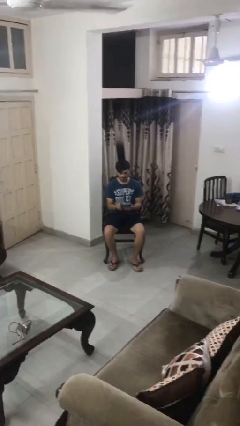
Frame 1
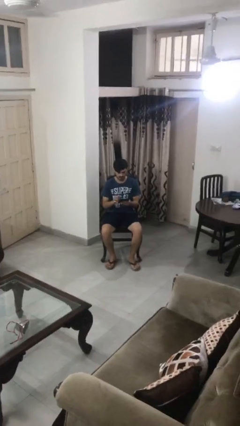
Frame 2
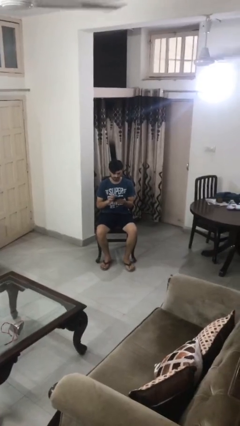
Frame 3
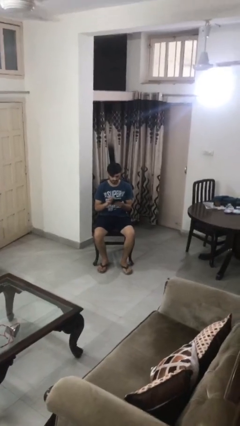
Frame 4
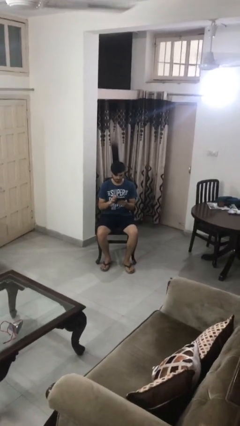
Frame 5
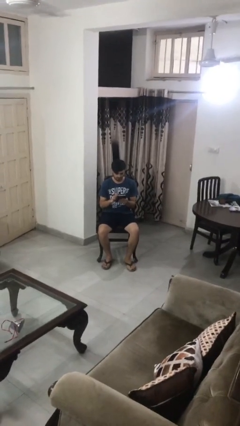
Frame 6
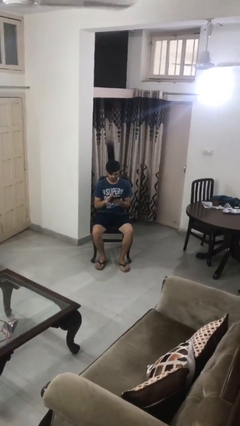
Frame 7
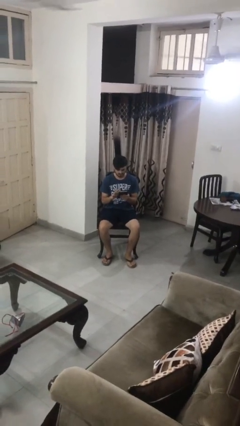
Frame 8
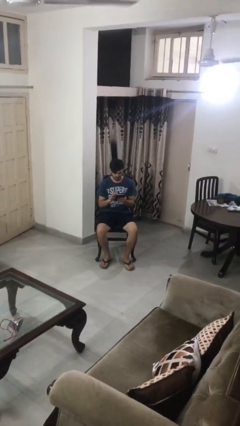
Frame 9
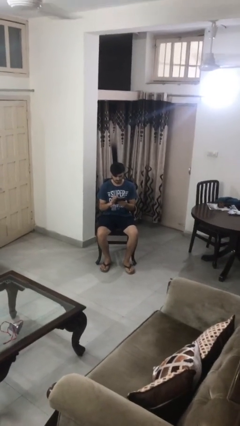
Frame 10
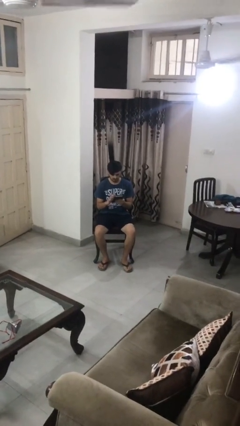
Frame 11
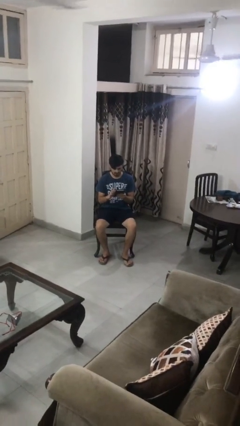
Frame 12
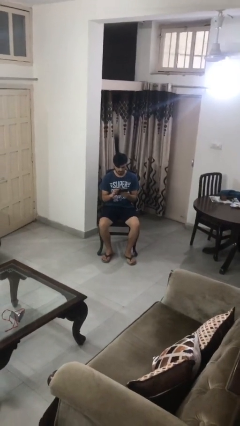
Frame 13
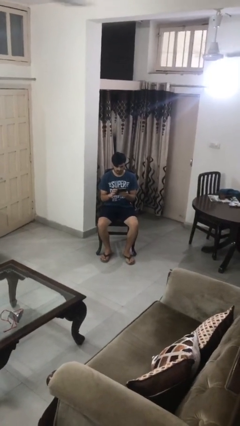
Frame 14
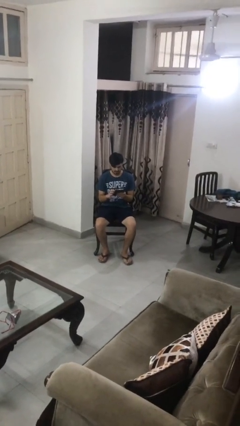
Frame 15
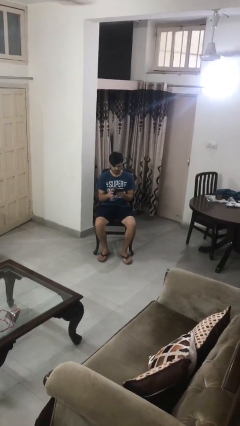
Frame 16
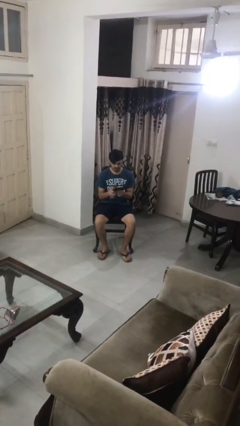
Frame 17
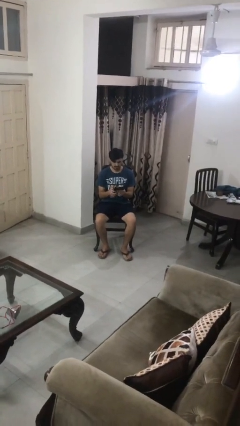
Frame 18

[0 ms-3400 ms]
person interacts with tablet

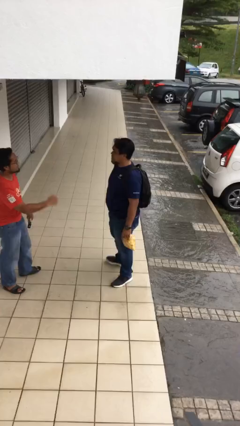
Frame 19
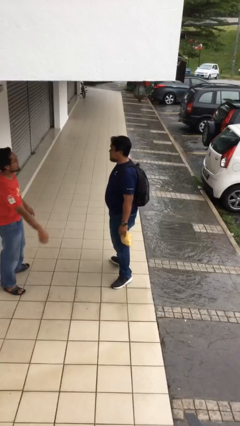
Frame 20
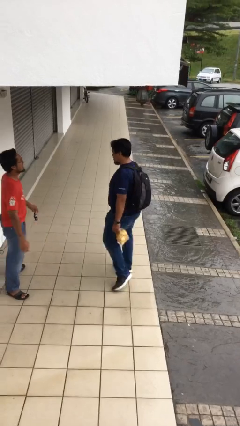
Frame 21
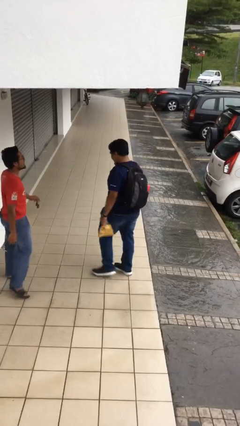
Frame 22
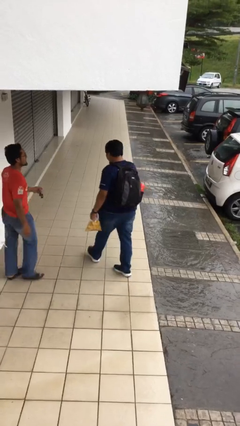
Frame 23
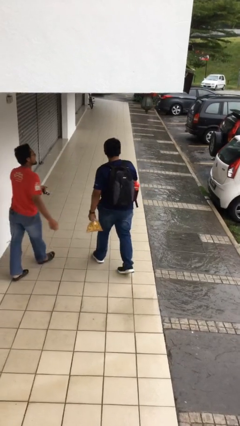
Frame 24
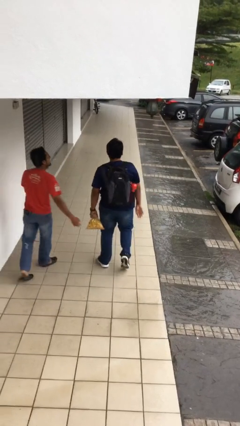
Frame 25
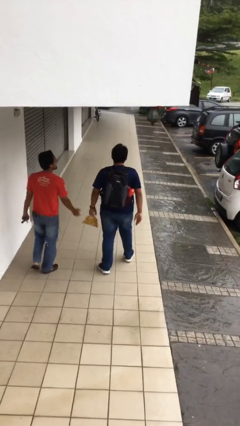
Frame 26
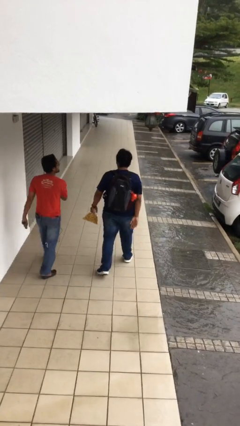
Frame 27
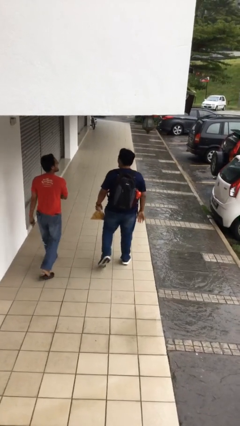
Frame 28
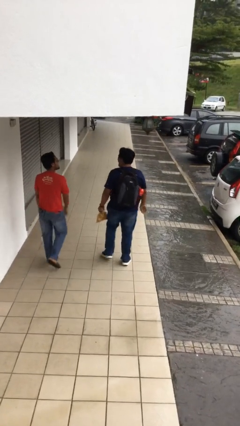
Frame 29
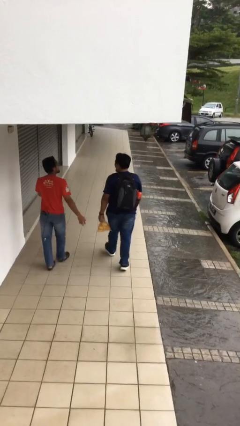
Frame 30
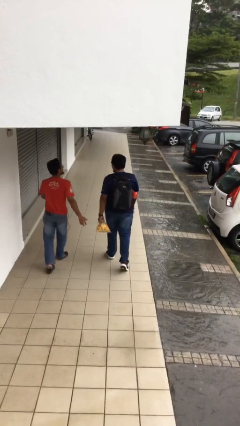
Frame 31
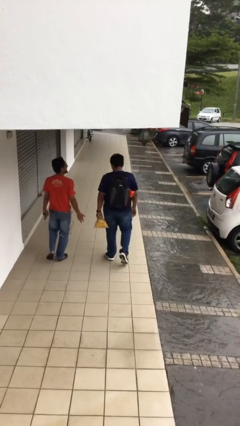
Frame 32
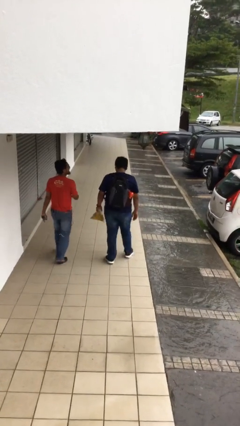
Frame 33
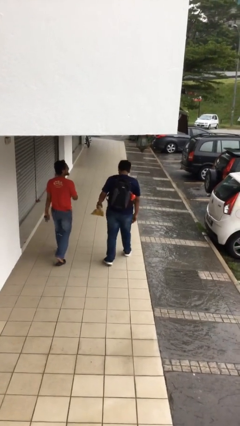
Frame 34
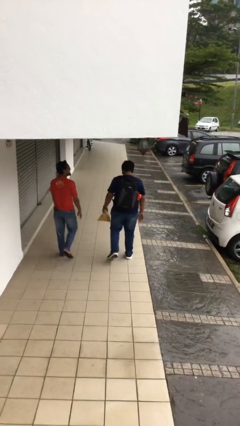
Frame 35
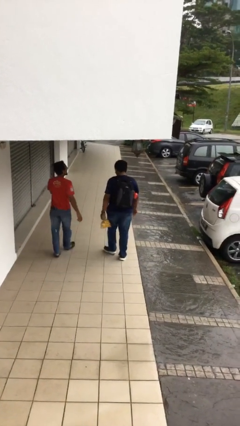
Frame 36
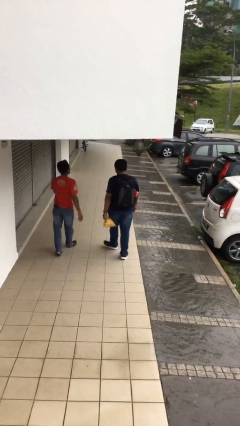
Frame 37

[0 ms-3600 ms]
person talks to person

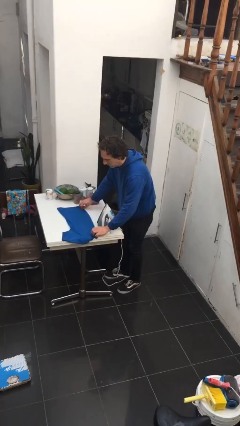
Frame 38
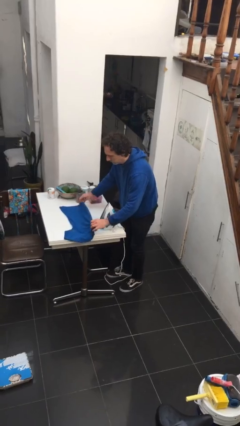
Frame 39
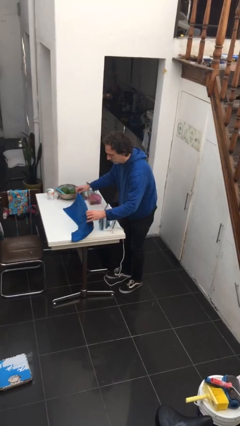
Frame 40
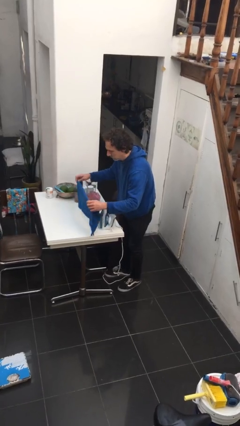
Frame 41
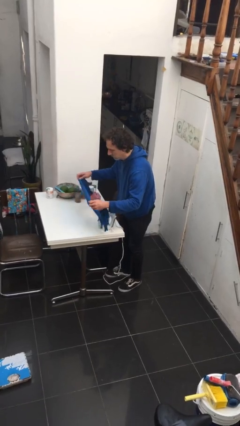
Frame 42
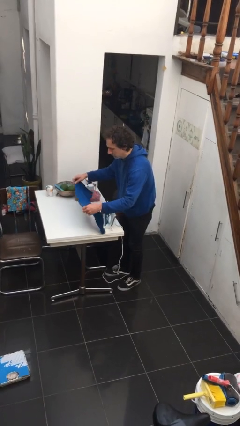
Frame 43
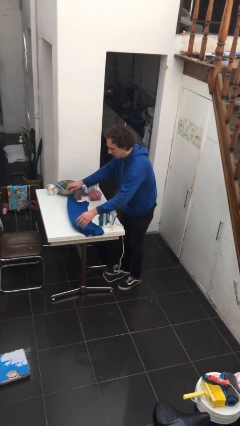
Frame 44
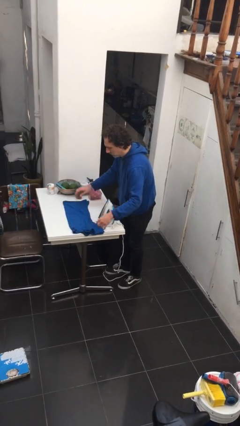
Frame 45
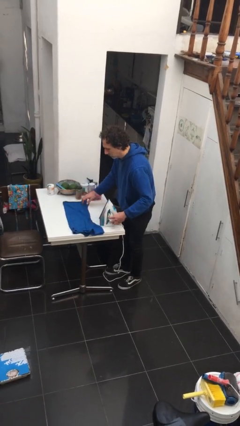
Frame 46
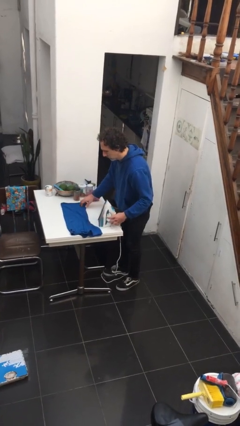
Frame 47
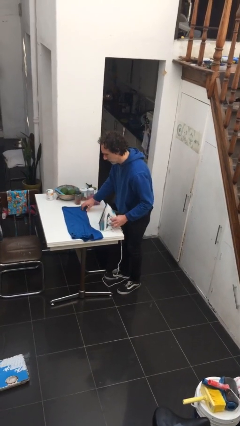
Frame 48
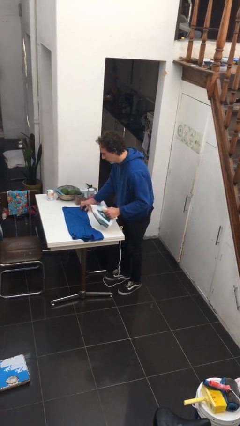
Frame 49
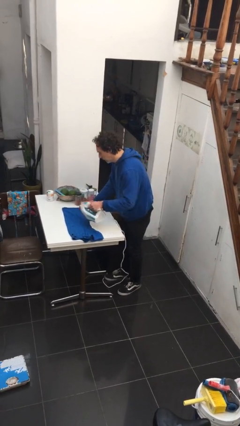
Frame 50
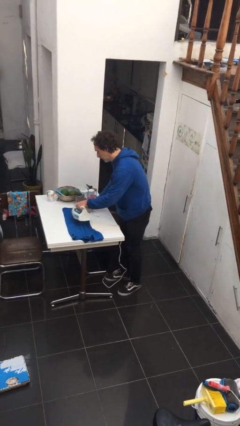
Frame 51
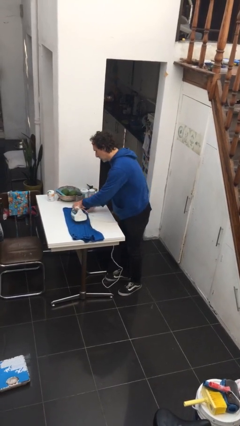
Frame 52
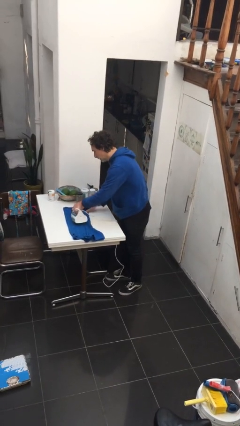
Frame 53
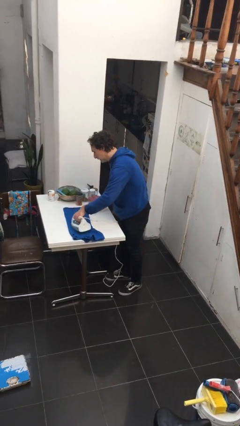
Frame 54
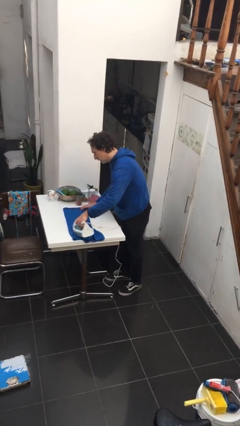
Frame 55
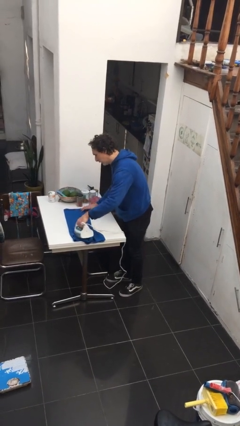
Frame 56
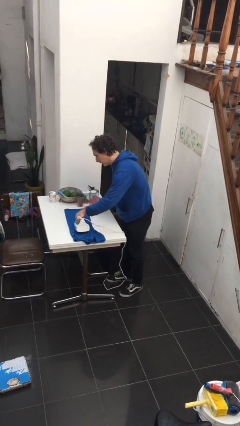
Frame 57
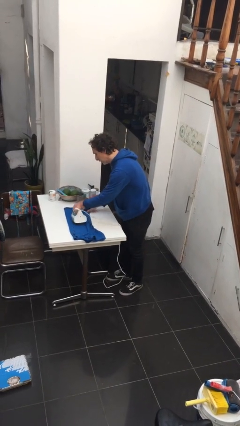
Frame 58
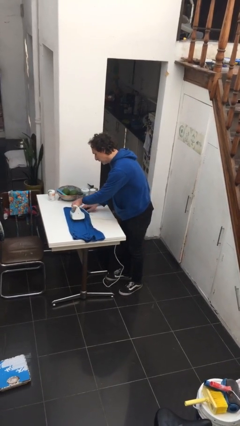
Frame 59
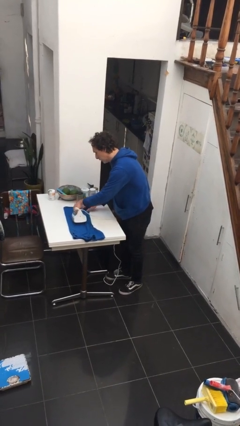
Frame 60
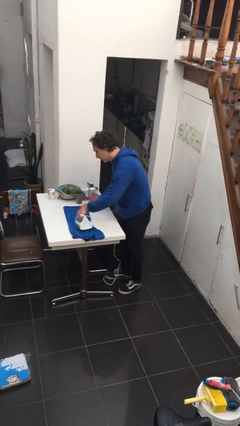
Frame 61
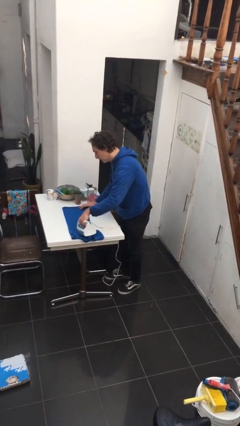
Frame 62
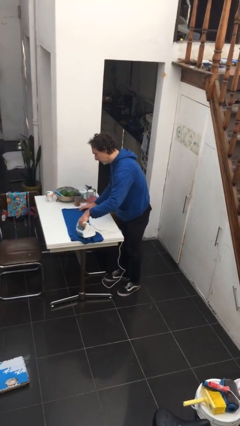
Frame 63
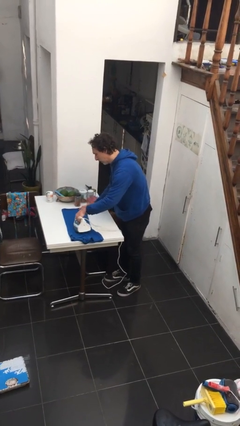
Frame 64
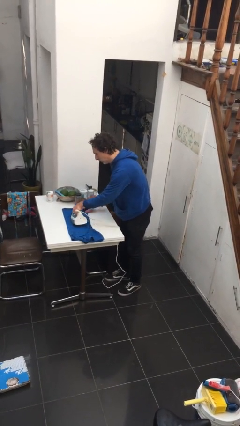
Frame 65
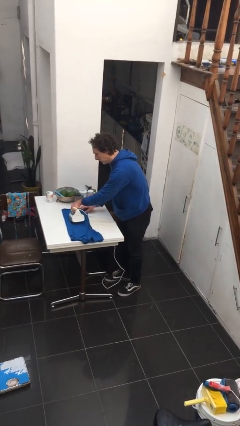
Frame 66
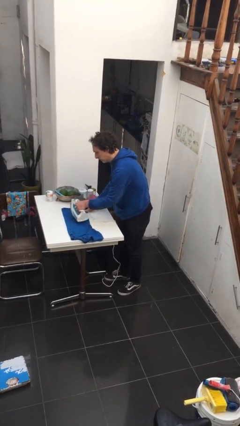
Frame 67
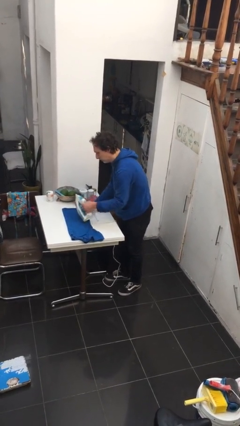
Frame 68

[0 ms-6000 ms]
person irons clothes

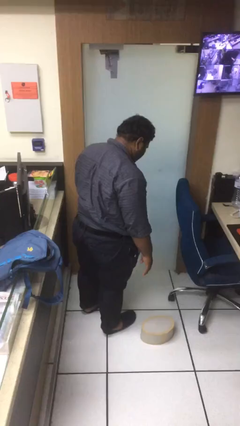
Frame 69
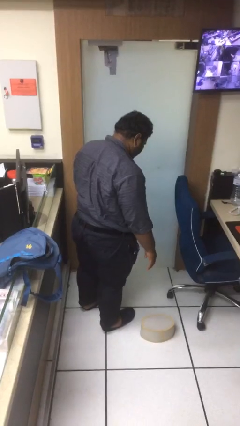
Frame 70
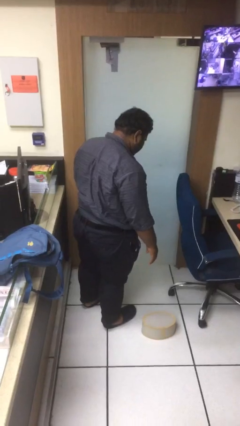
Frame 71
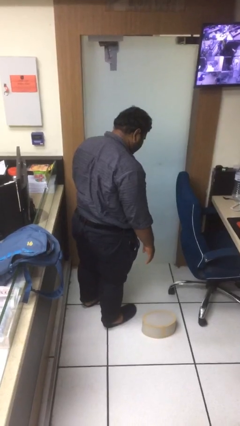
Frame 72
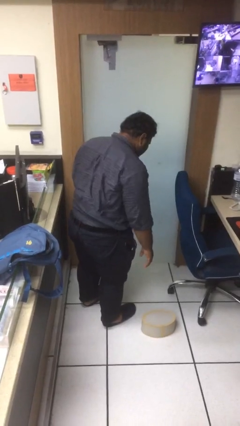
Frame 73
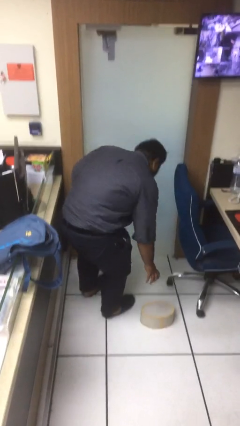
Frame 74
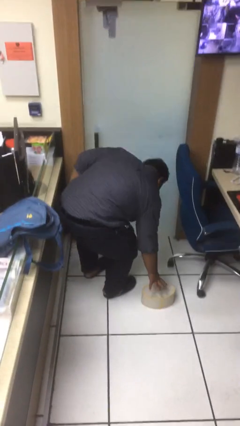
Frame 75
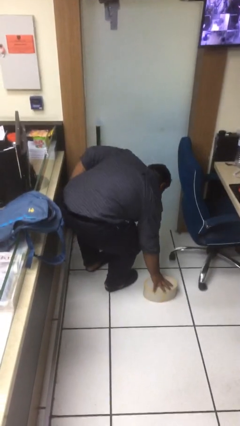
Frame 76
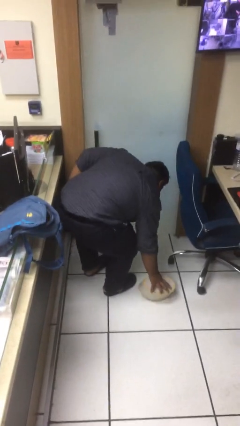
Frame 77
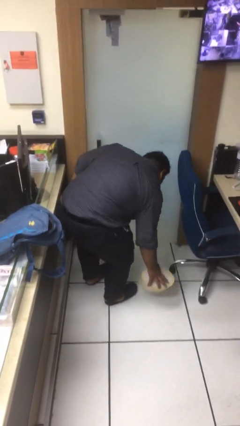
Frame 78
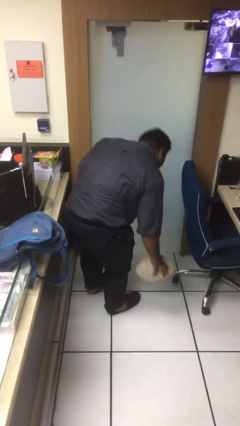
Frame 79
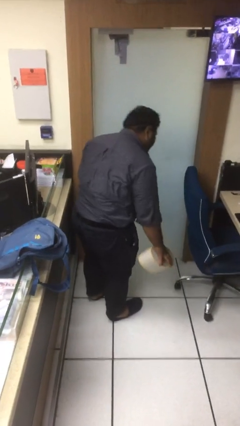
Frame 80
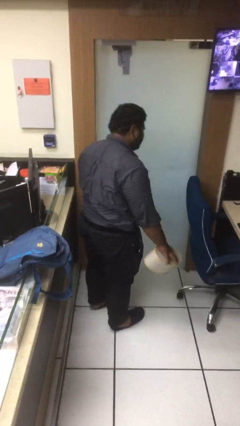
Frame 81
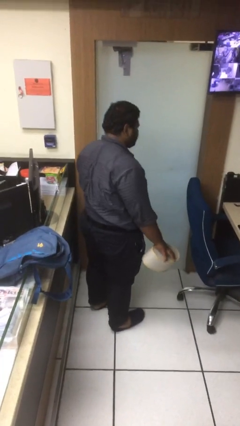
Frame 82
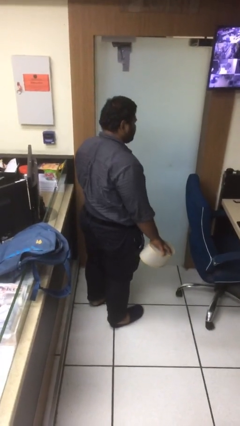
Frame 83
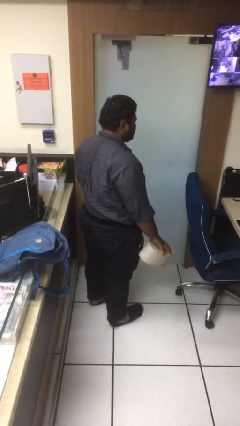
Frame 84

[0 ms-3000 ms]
person picks up object from floor

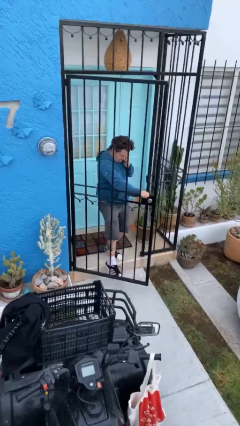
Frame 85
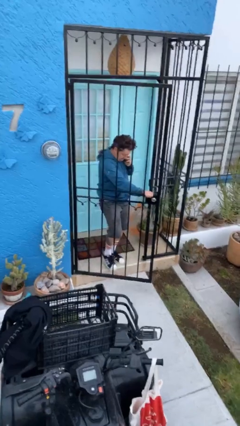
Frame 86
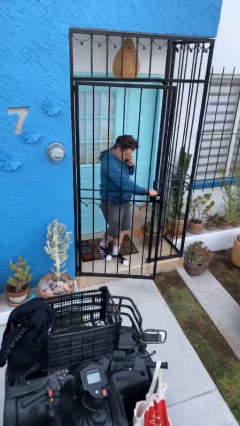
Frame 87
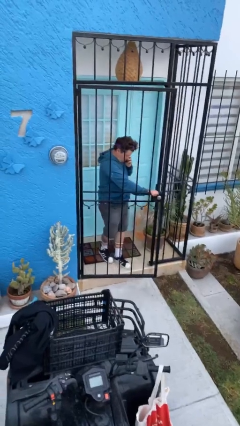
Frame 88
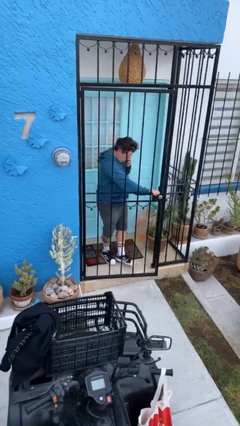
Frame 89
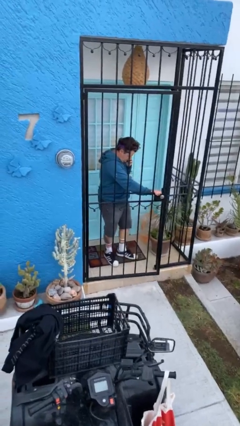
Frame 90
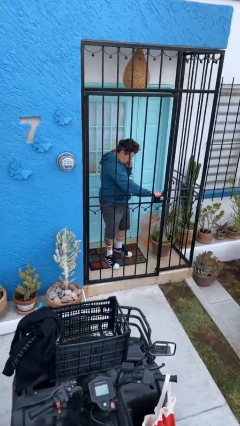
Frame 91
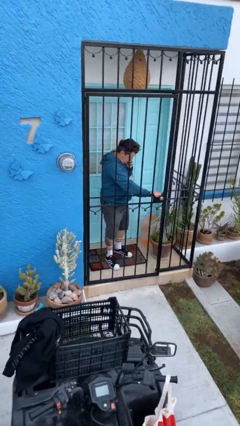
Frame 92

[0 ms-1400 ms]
person closes facility door
